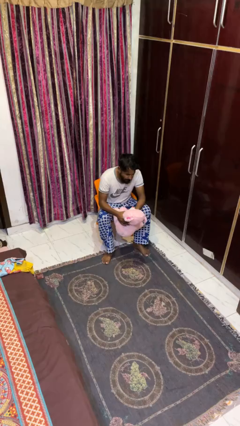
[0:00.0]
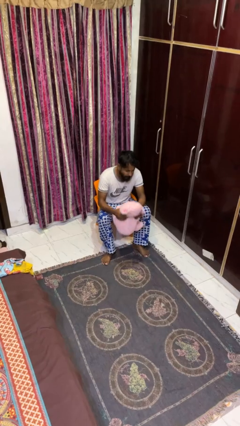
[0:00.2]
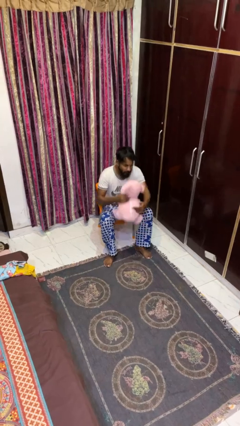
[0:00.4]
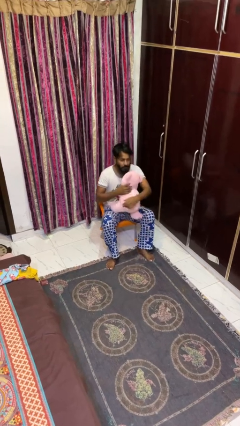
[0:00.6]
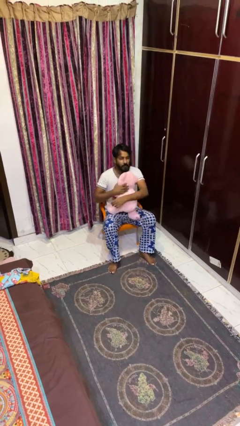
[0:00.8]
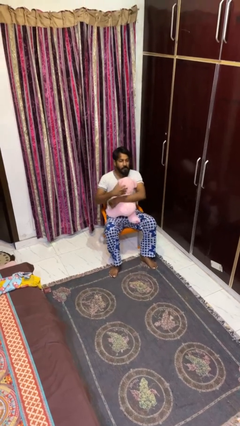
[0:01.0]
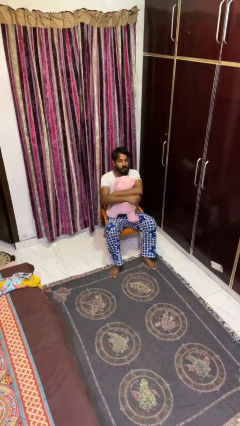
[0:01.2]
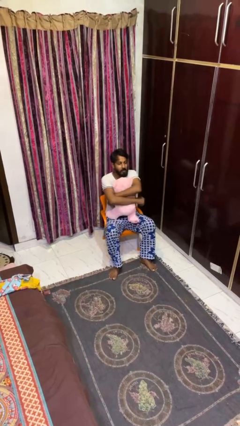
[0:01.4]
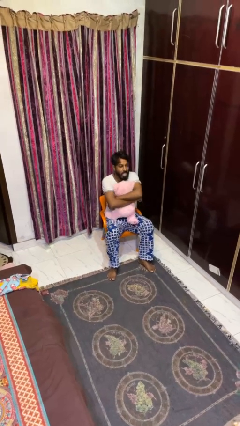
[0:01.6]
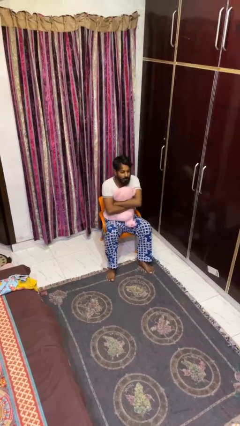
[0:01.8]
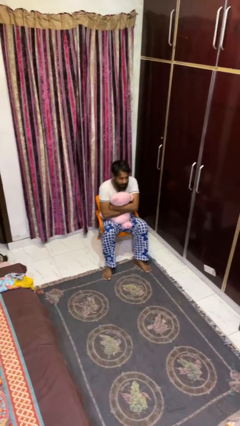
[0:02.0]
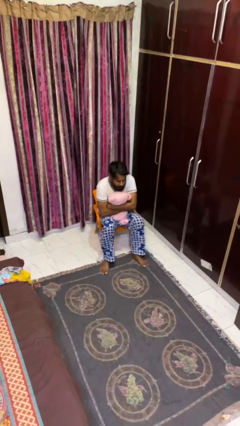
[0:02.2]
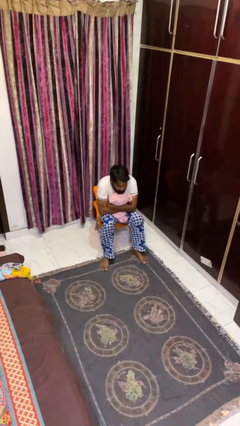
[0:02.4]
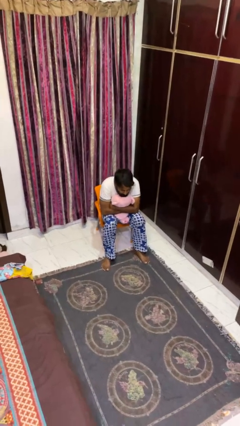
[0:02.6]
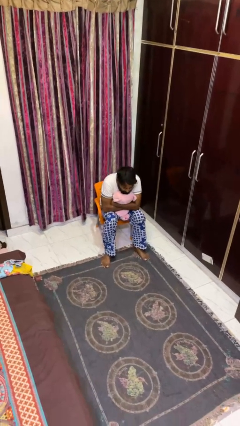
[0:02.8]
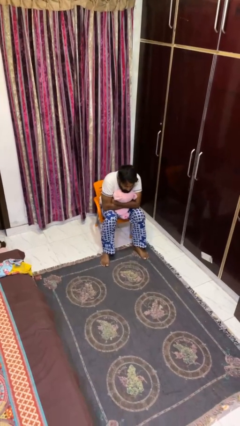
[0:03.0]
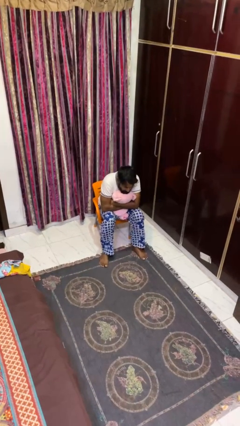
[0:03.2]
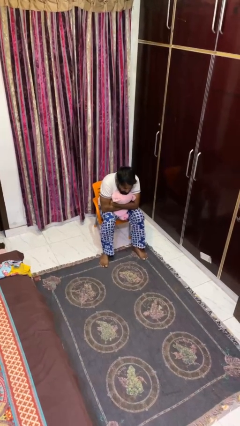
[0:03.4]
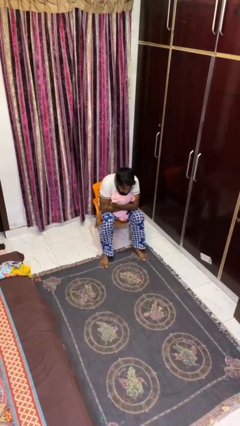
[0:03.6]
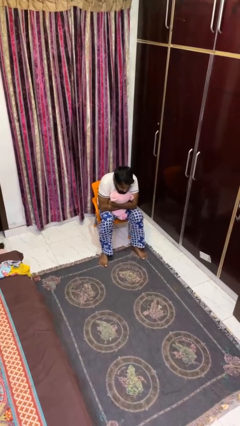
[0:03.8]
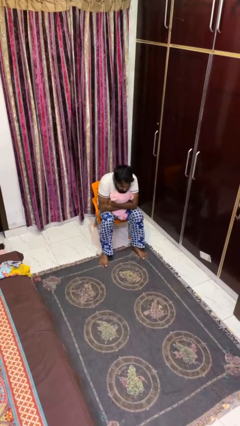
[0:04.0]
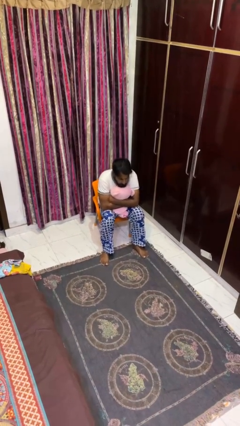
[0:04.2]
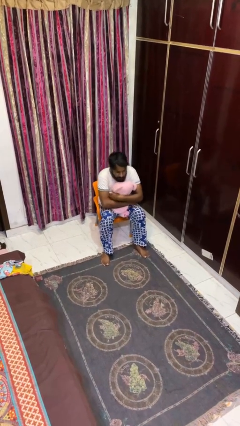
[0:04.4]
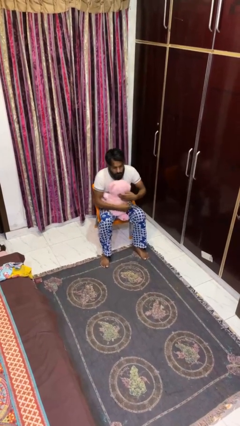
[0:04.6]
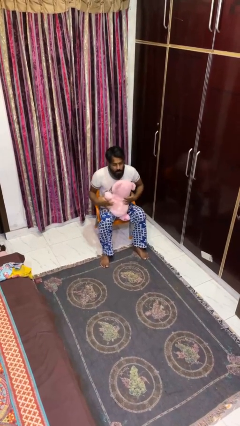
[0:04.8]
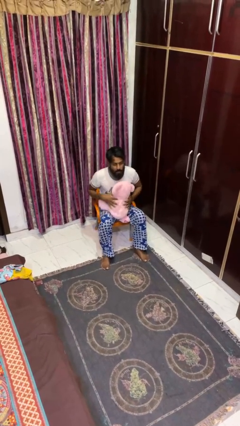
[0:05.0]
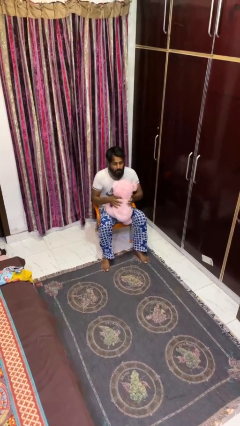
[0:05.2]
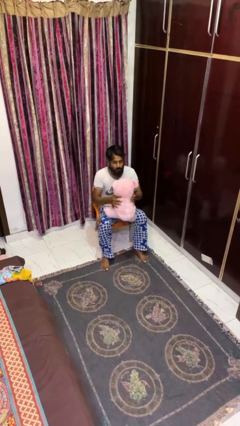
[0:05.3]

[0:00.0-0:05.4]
person hugs stuffed animal

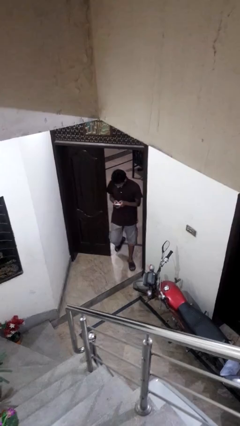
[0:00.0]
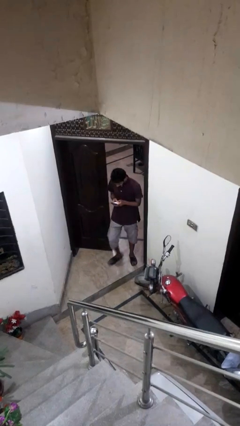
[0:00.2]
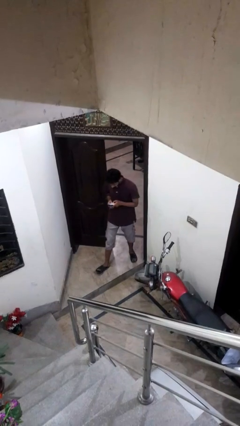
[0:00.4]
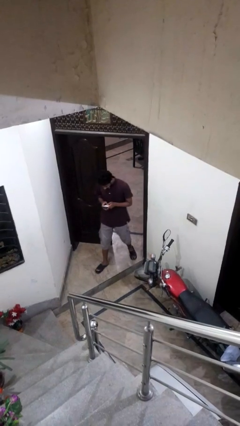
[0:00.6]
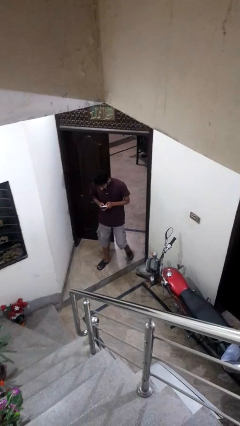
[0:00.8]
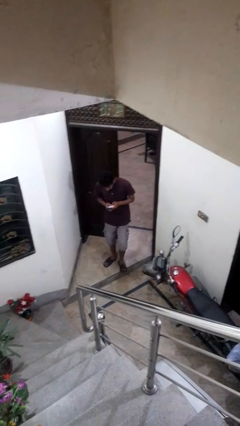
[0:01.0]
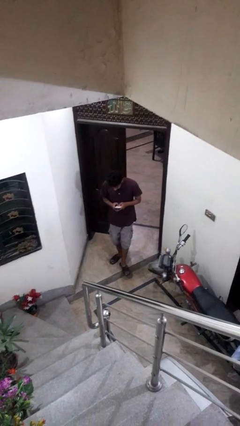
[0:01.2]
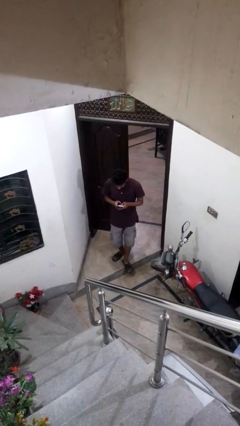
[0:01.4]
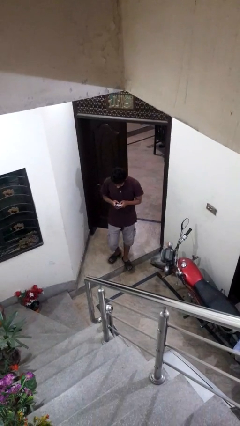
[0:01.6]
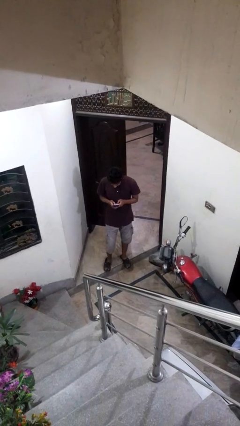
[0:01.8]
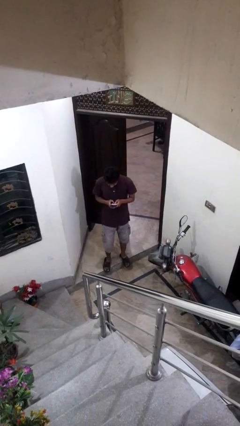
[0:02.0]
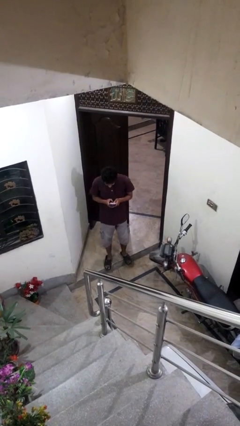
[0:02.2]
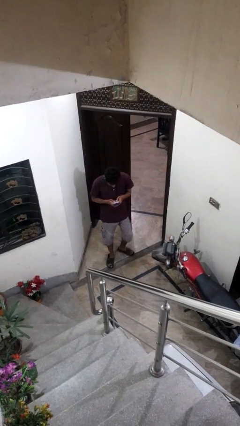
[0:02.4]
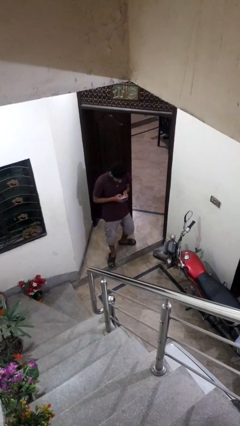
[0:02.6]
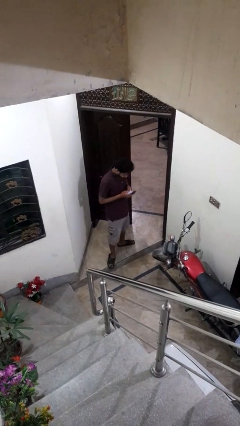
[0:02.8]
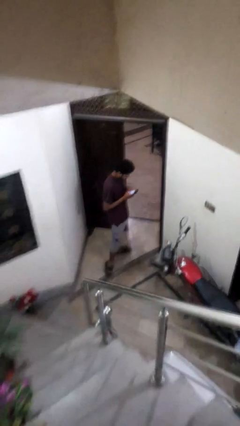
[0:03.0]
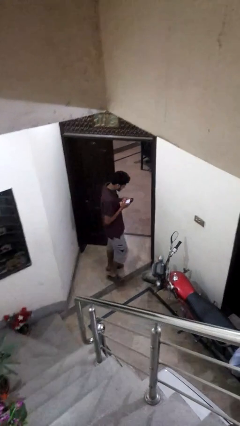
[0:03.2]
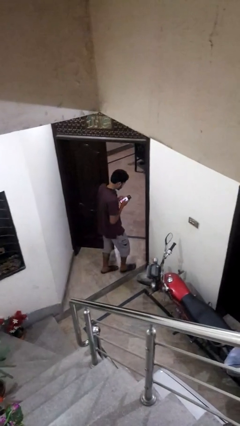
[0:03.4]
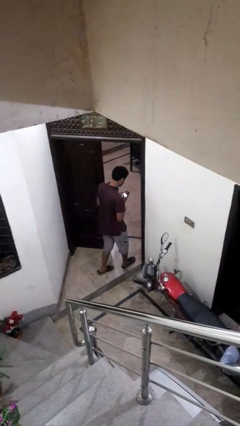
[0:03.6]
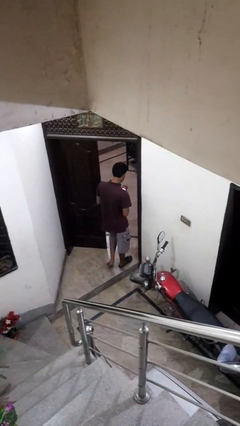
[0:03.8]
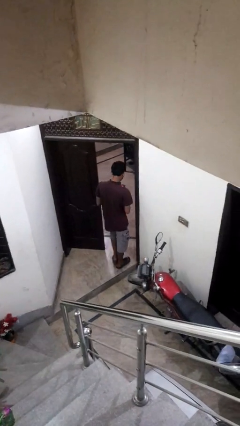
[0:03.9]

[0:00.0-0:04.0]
person enters scene through structure

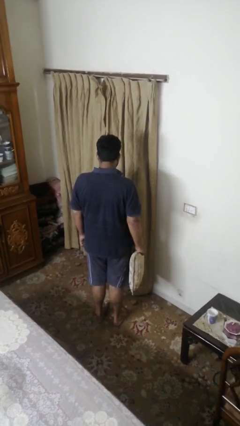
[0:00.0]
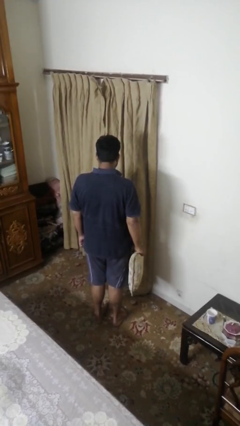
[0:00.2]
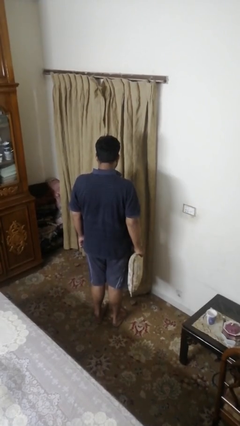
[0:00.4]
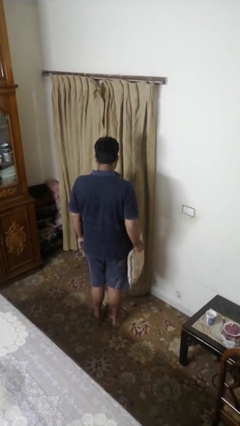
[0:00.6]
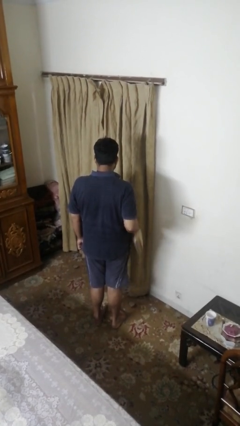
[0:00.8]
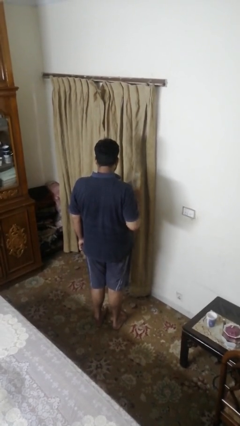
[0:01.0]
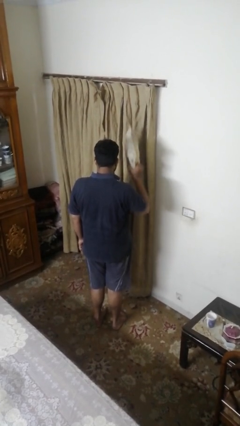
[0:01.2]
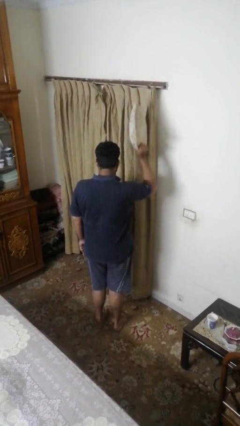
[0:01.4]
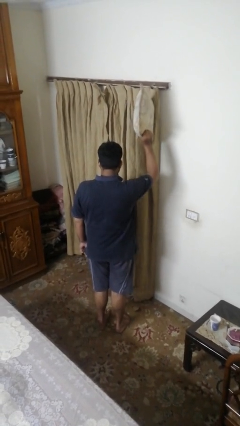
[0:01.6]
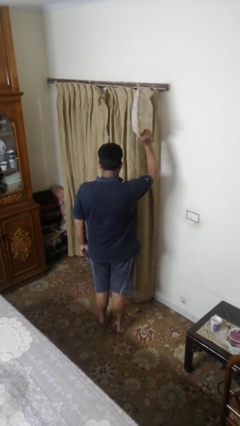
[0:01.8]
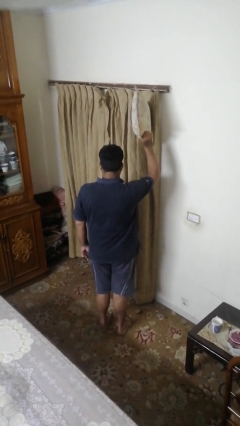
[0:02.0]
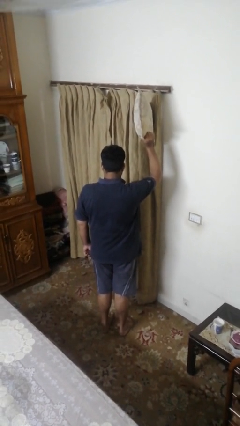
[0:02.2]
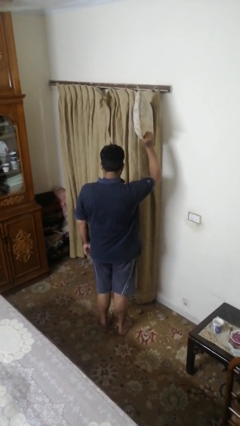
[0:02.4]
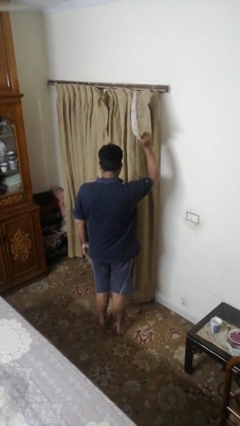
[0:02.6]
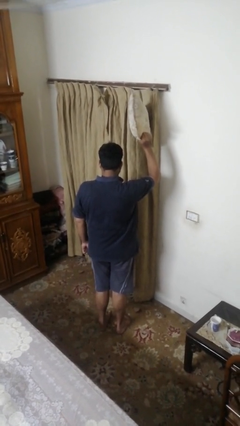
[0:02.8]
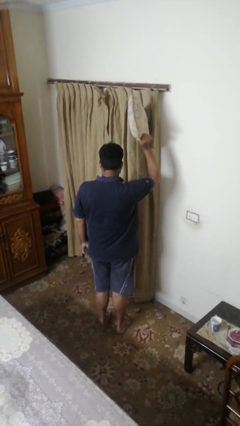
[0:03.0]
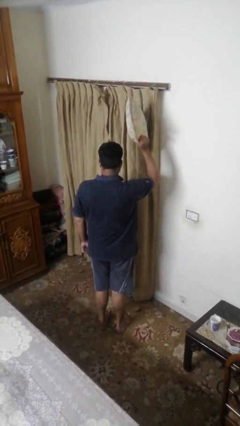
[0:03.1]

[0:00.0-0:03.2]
person holds object above head

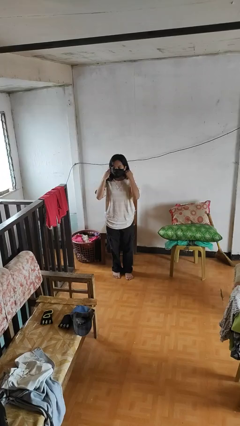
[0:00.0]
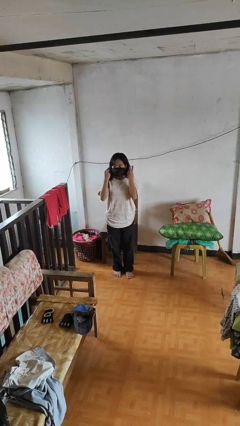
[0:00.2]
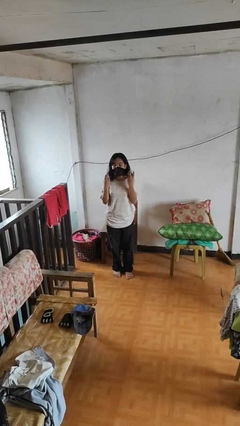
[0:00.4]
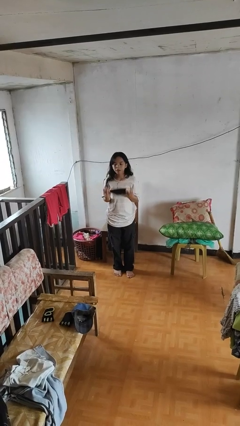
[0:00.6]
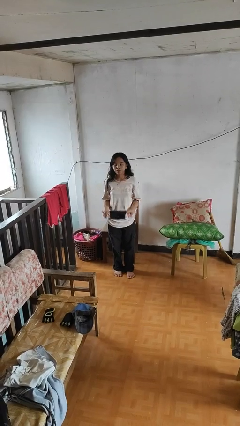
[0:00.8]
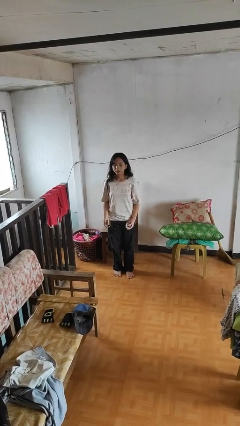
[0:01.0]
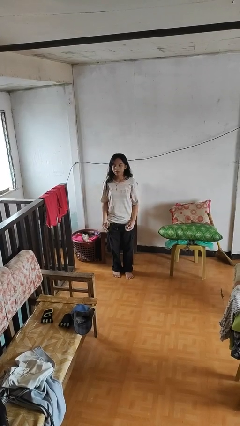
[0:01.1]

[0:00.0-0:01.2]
person takes off facemask

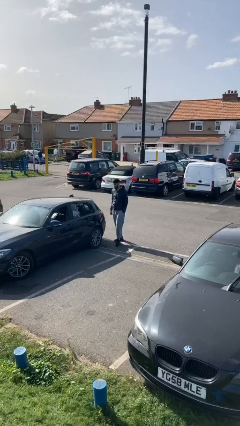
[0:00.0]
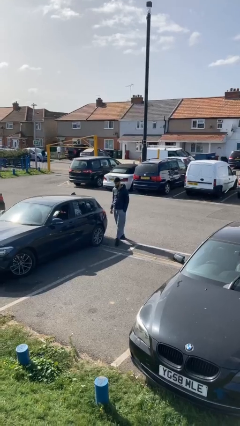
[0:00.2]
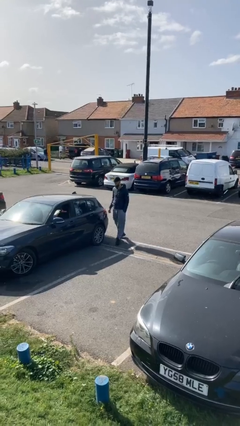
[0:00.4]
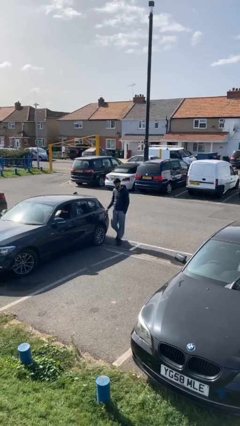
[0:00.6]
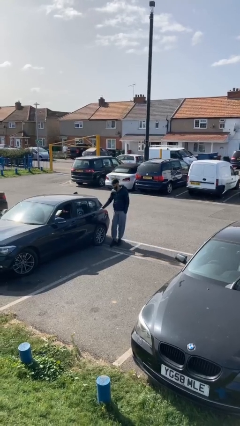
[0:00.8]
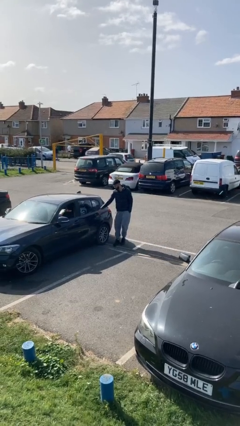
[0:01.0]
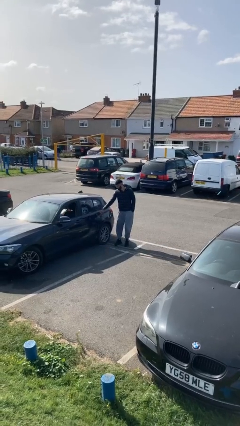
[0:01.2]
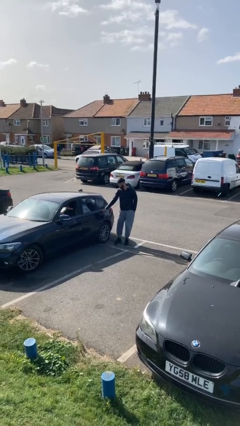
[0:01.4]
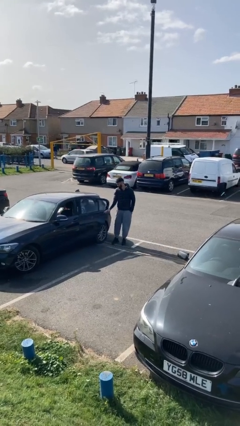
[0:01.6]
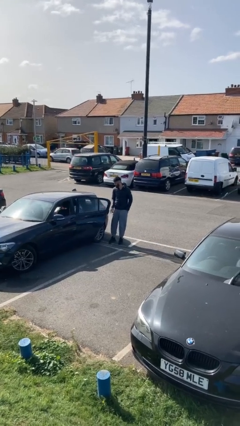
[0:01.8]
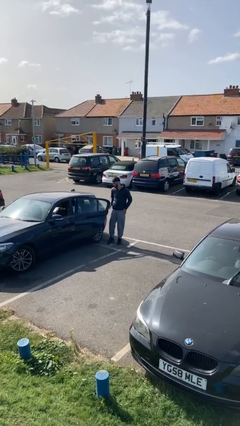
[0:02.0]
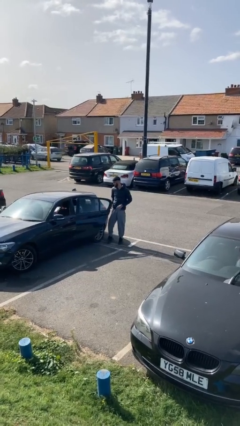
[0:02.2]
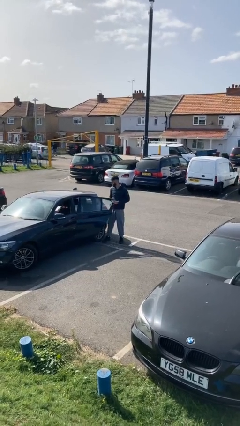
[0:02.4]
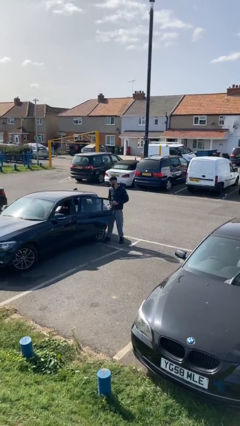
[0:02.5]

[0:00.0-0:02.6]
person opens car door

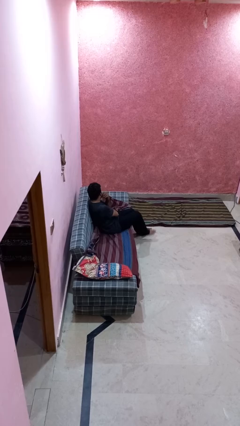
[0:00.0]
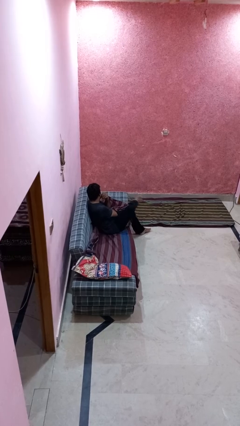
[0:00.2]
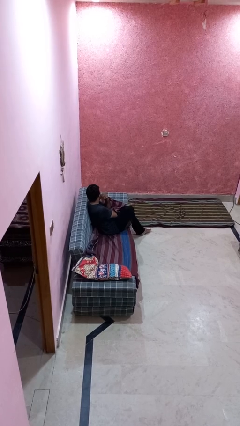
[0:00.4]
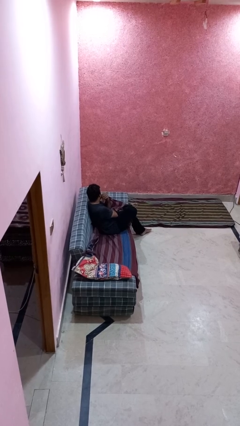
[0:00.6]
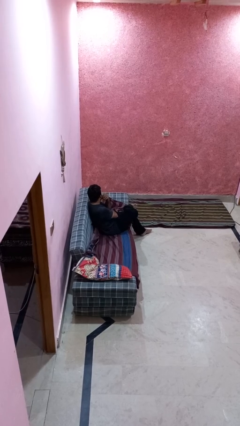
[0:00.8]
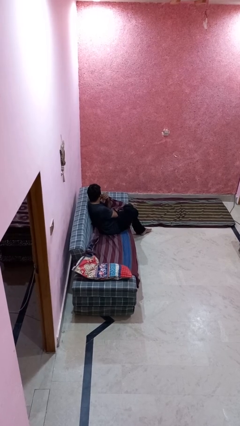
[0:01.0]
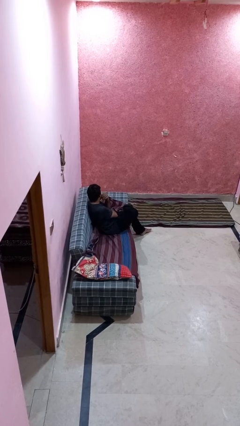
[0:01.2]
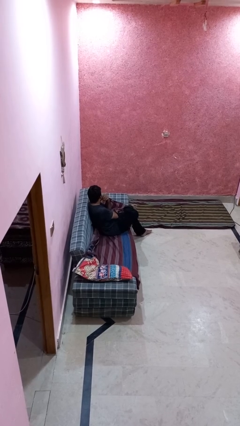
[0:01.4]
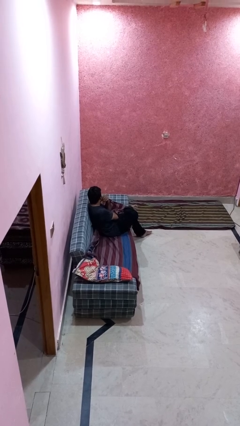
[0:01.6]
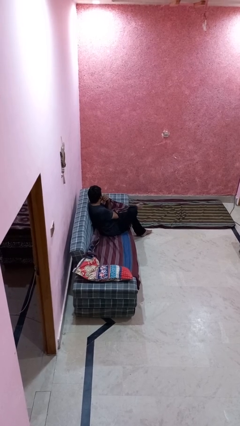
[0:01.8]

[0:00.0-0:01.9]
person crosses legs
